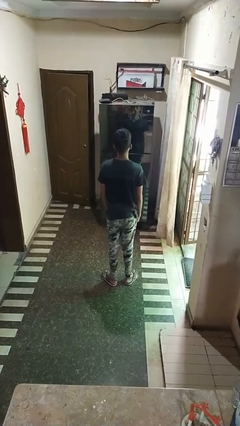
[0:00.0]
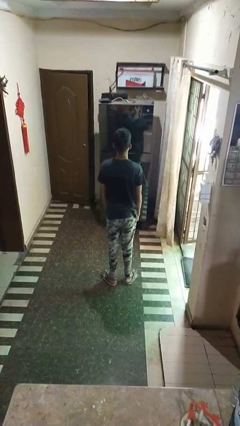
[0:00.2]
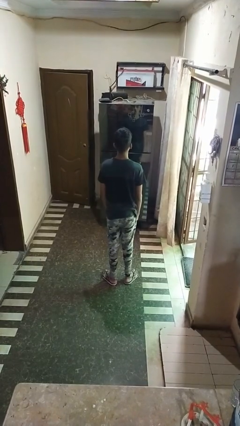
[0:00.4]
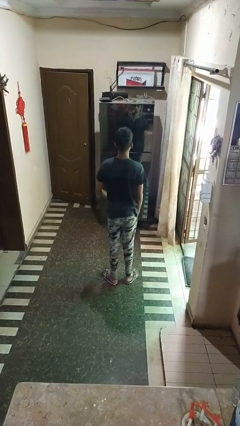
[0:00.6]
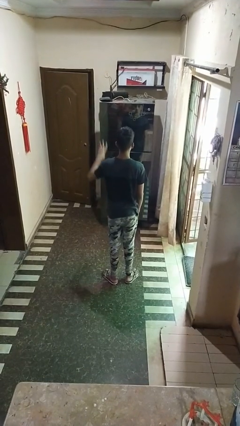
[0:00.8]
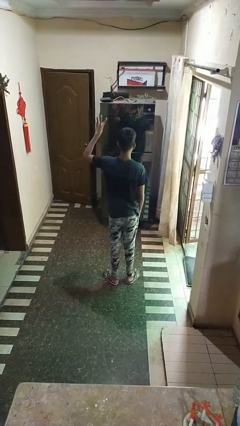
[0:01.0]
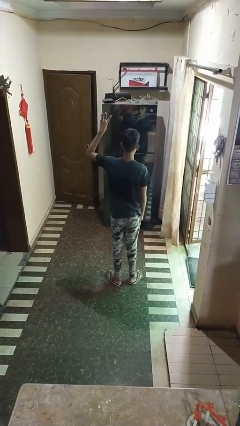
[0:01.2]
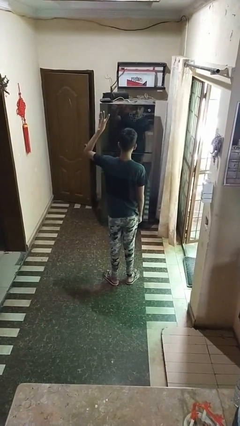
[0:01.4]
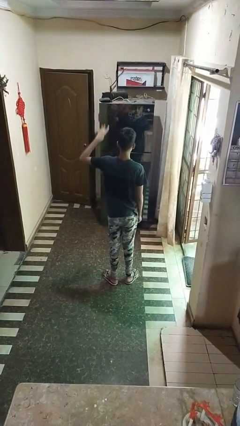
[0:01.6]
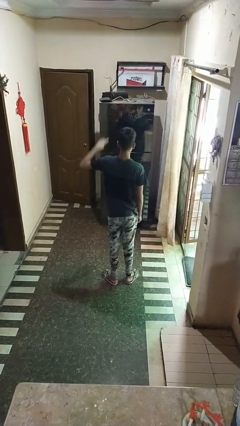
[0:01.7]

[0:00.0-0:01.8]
person gestures number three

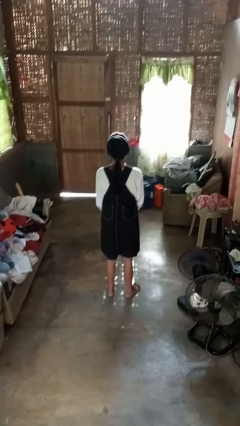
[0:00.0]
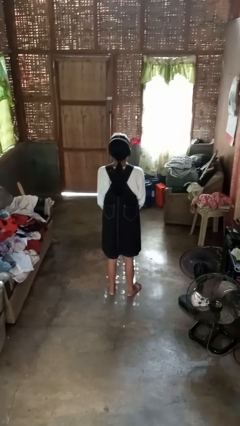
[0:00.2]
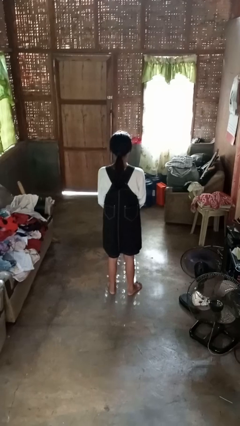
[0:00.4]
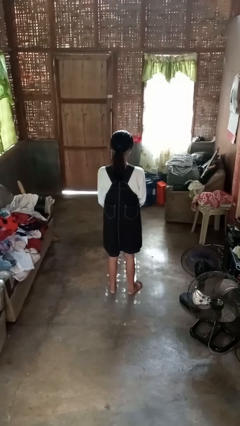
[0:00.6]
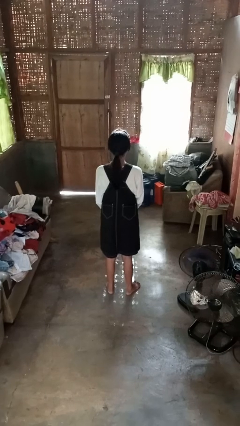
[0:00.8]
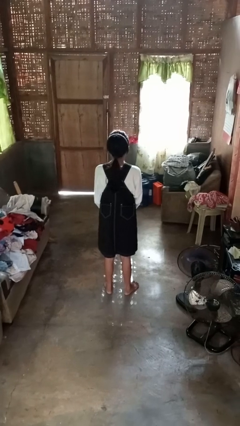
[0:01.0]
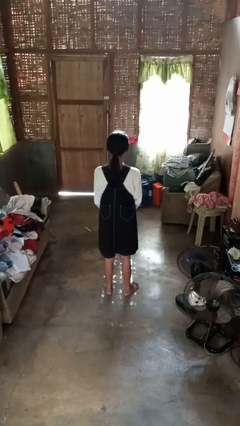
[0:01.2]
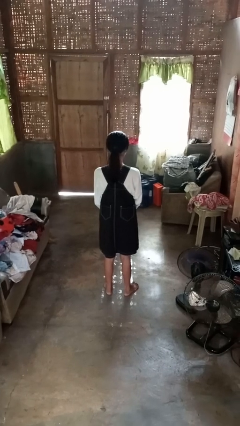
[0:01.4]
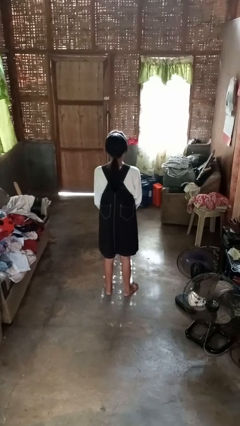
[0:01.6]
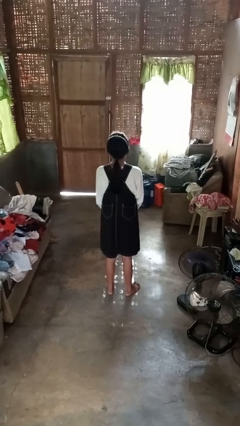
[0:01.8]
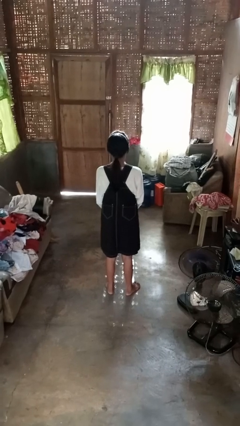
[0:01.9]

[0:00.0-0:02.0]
person nods head

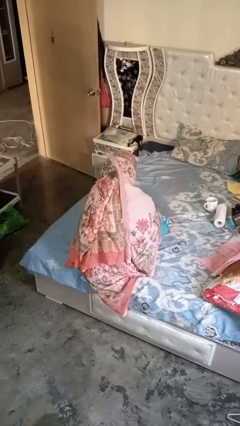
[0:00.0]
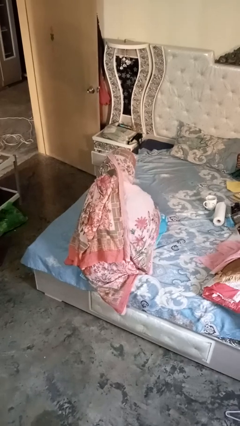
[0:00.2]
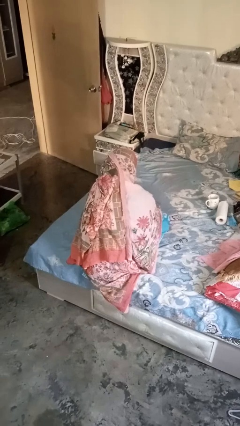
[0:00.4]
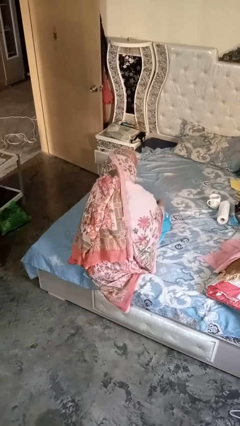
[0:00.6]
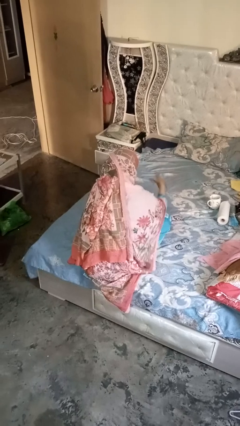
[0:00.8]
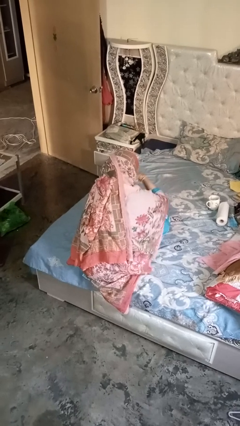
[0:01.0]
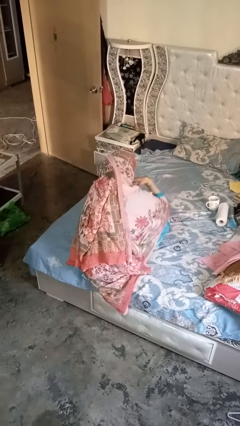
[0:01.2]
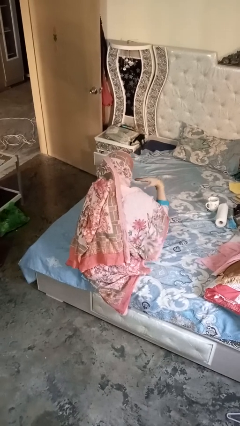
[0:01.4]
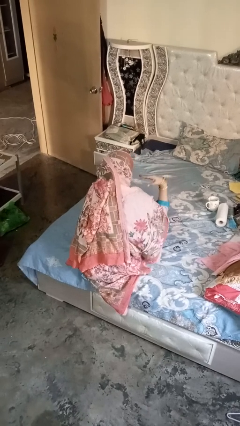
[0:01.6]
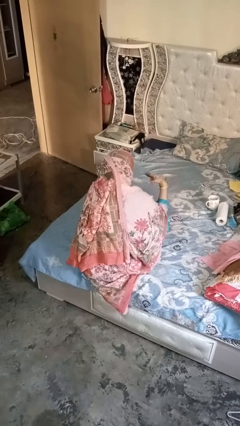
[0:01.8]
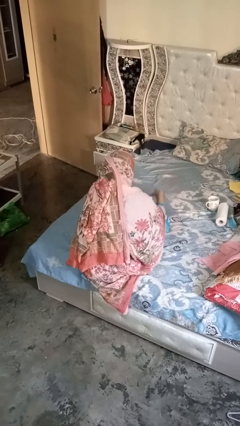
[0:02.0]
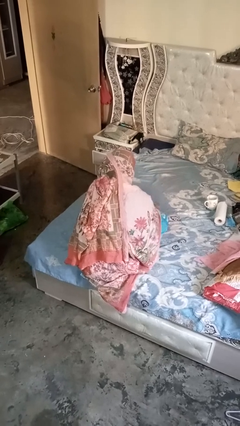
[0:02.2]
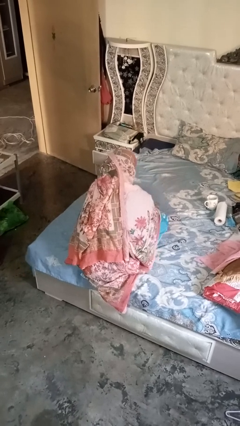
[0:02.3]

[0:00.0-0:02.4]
person gestures cut

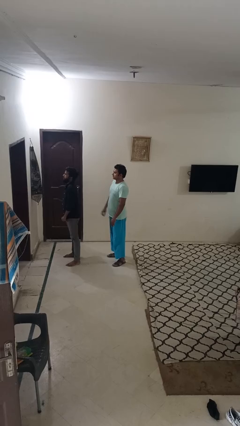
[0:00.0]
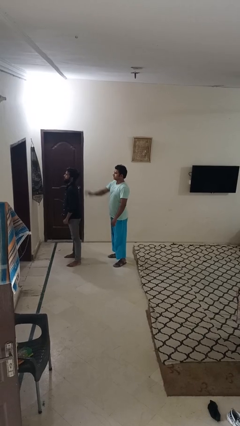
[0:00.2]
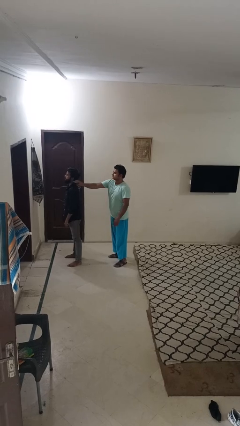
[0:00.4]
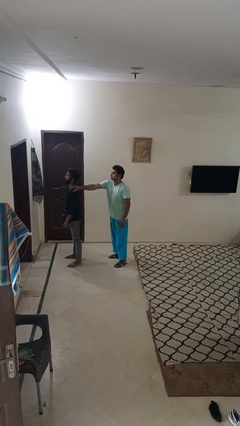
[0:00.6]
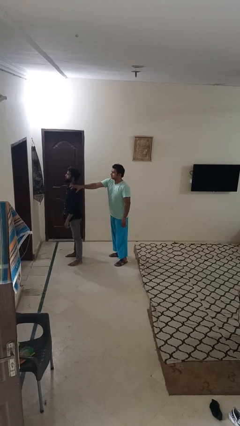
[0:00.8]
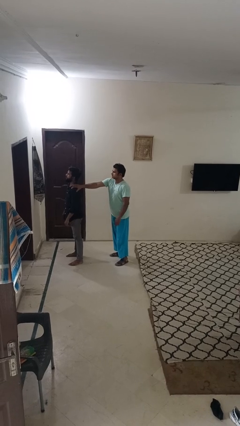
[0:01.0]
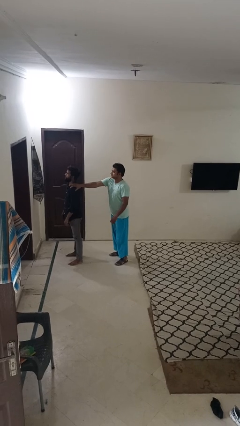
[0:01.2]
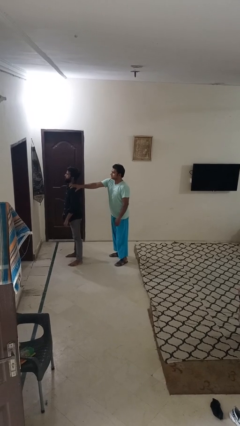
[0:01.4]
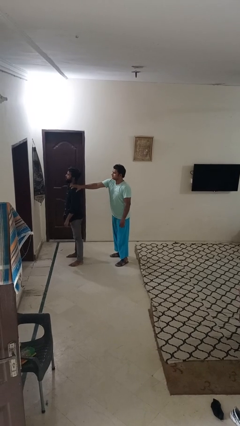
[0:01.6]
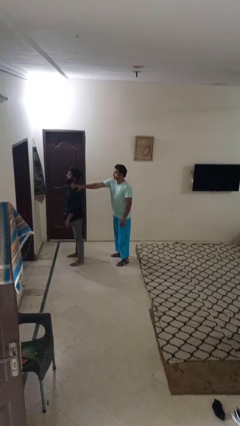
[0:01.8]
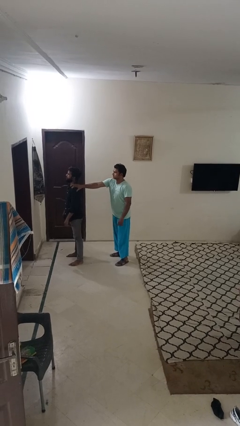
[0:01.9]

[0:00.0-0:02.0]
person grabs person by shoulder

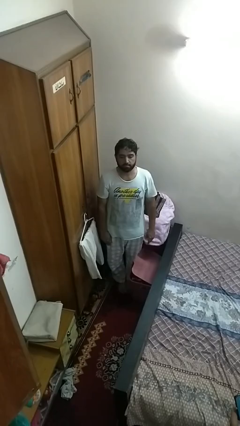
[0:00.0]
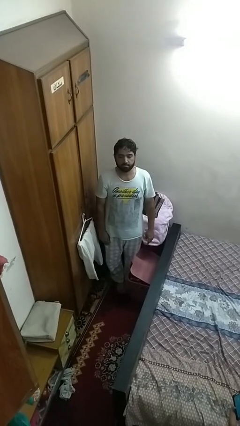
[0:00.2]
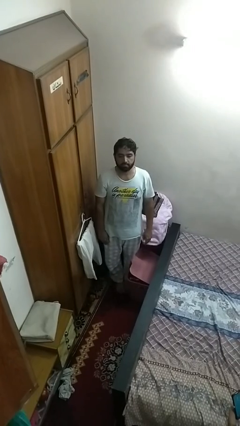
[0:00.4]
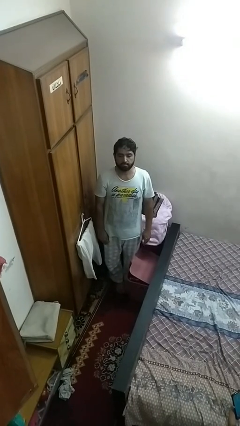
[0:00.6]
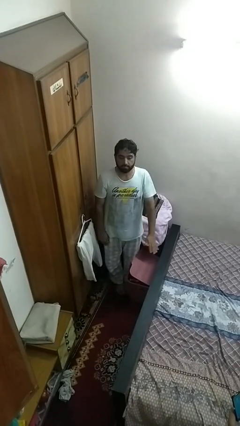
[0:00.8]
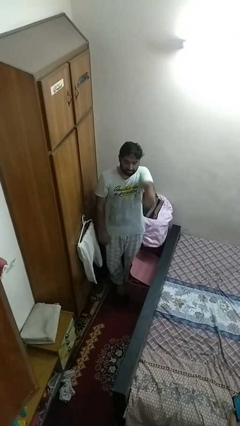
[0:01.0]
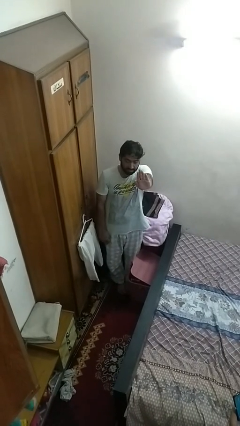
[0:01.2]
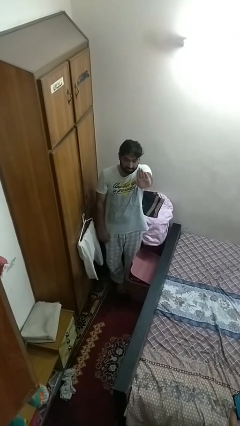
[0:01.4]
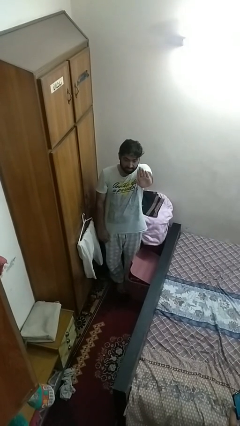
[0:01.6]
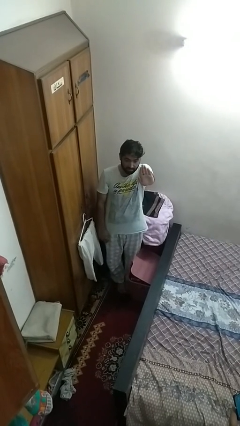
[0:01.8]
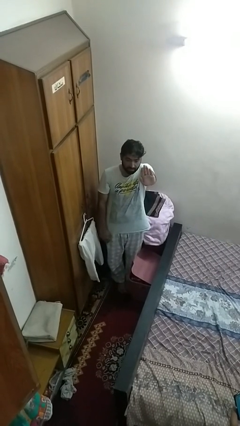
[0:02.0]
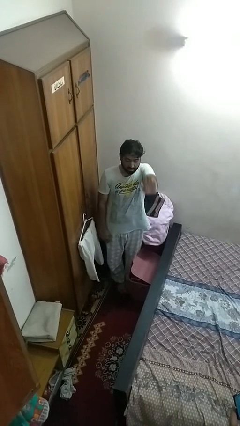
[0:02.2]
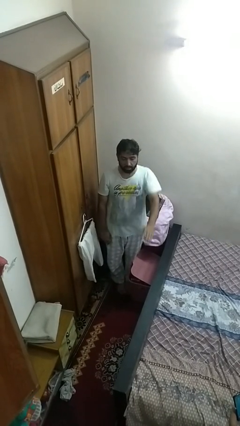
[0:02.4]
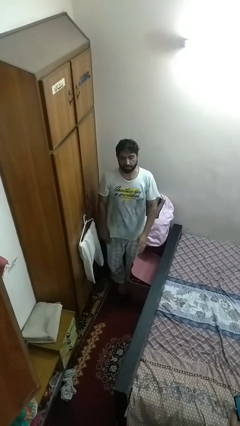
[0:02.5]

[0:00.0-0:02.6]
person gestures stop

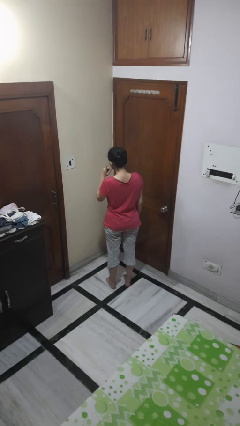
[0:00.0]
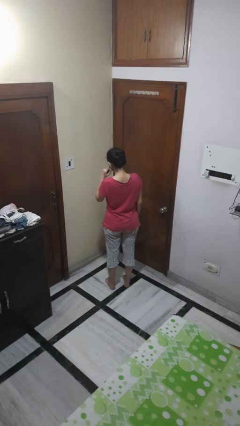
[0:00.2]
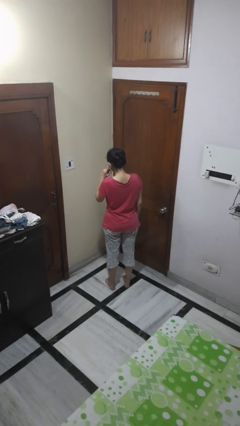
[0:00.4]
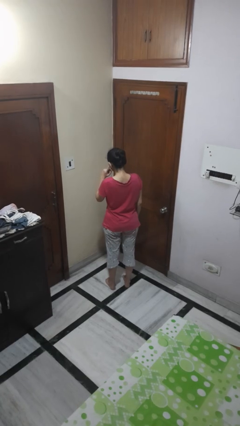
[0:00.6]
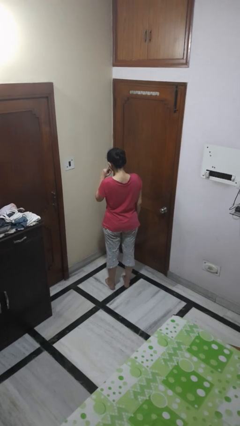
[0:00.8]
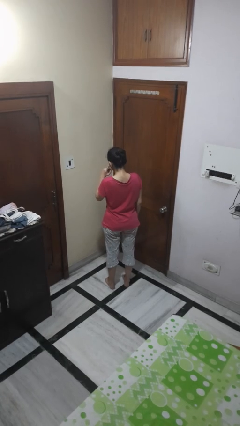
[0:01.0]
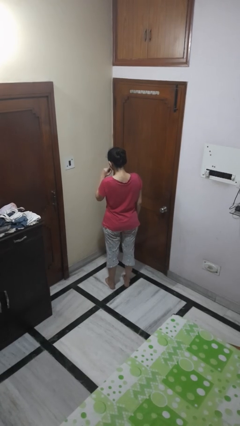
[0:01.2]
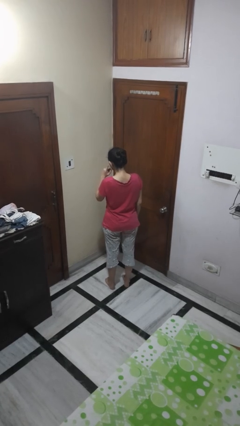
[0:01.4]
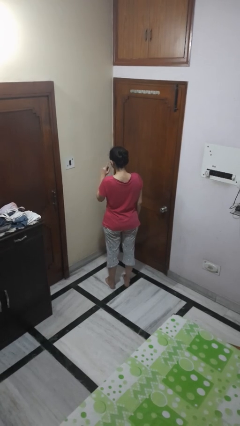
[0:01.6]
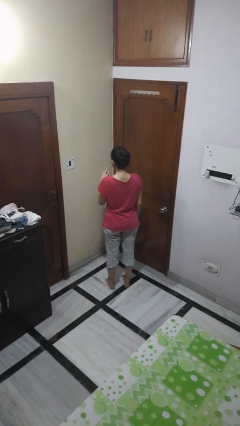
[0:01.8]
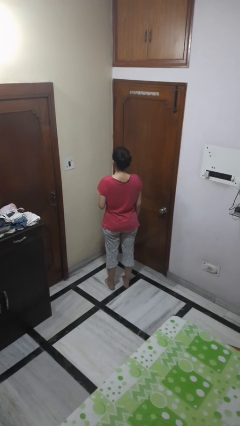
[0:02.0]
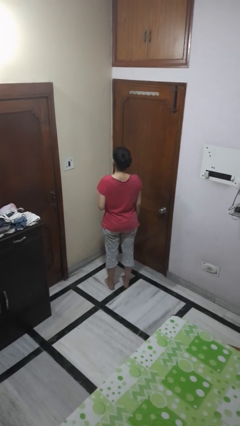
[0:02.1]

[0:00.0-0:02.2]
person gestures listen closely

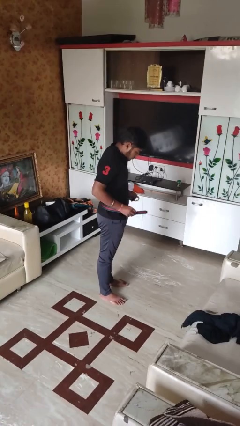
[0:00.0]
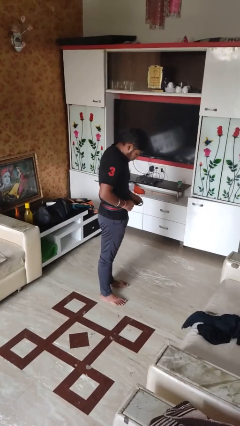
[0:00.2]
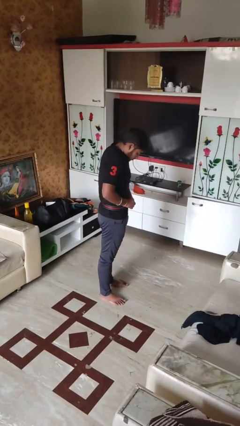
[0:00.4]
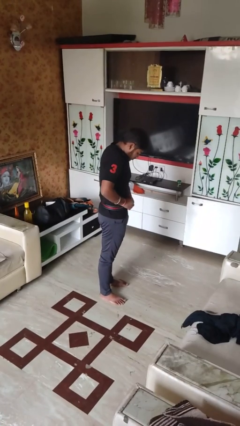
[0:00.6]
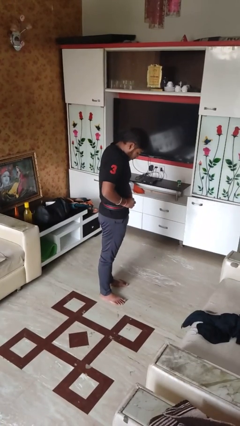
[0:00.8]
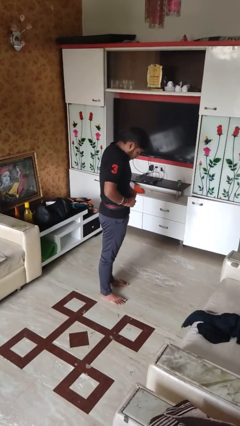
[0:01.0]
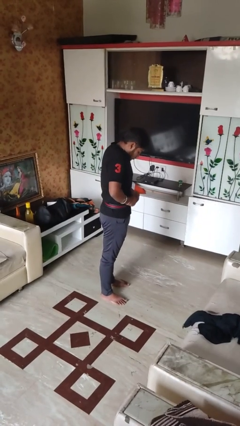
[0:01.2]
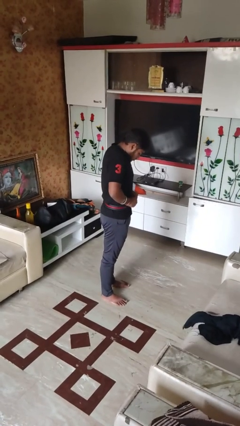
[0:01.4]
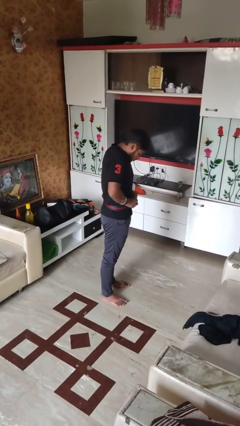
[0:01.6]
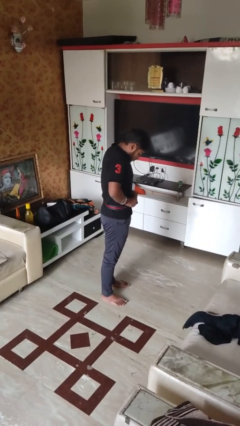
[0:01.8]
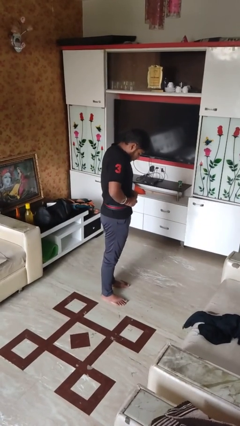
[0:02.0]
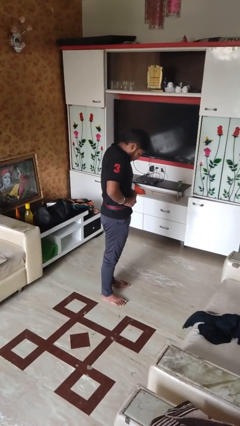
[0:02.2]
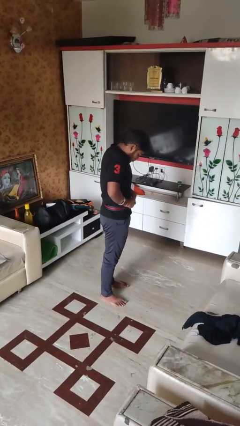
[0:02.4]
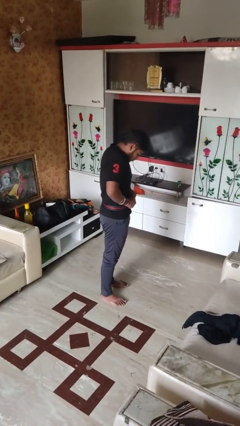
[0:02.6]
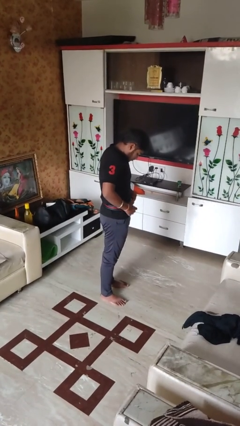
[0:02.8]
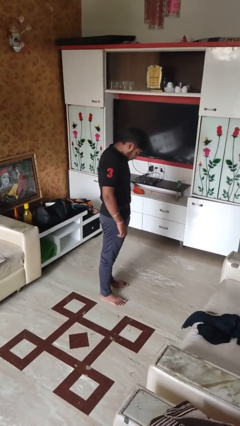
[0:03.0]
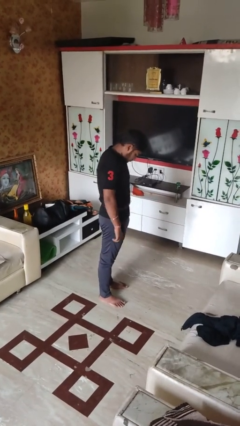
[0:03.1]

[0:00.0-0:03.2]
person puts on belt

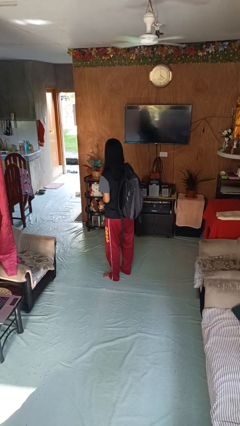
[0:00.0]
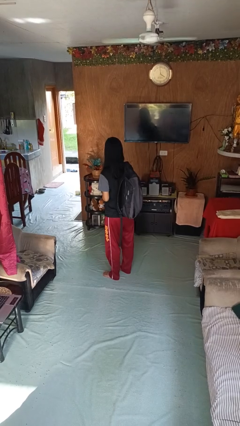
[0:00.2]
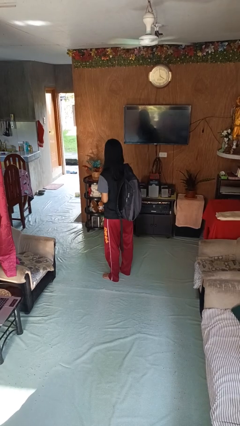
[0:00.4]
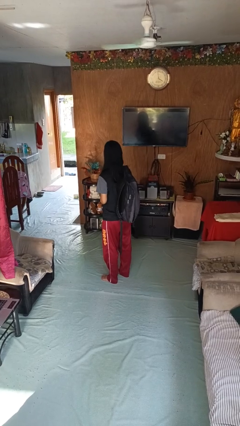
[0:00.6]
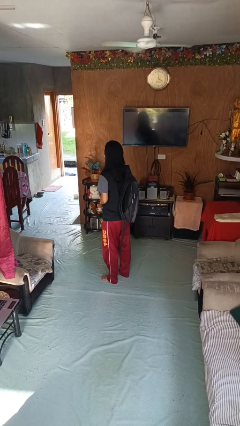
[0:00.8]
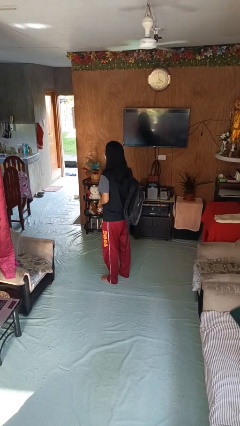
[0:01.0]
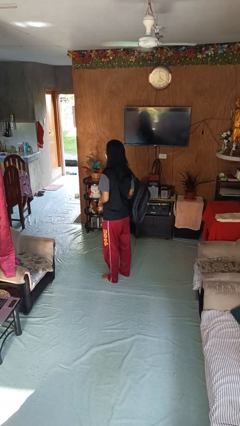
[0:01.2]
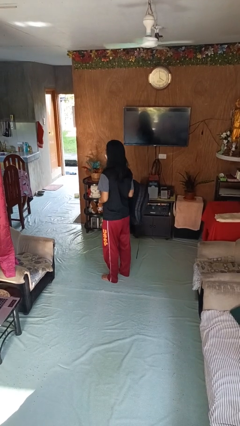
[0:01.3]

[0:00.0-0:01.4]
person takes off backpack
